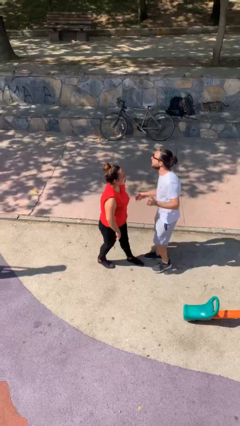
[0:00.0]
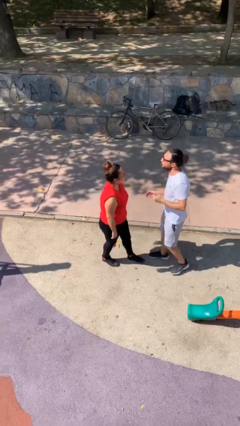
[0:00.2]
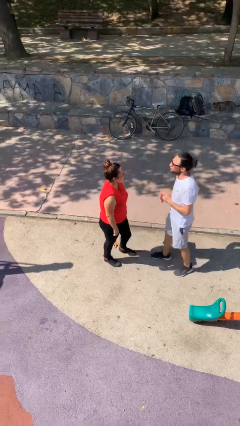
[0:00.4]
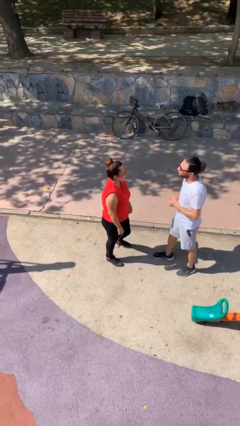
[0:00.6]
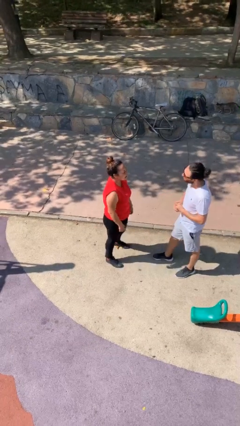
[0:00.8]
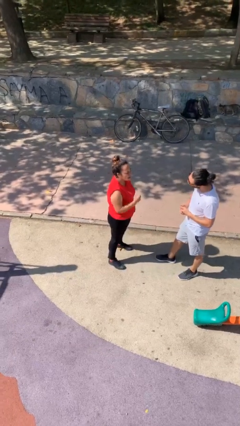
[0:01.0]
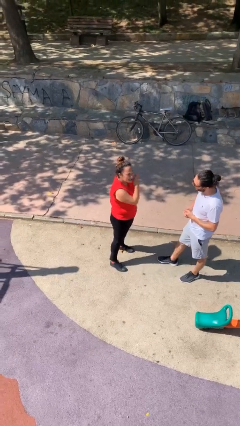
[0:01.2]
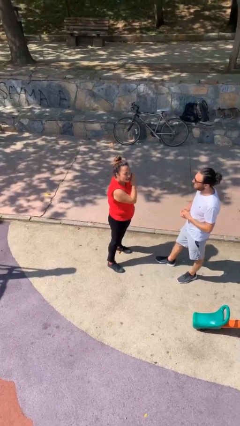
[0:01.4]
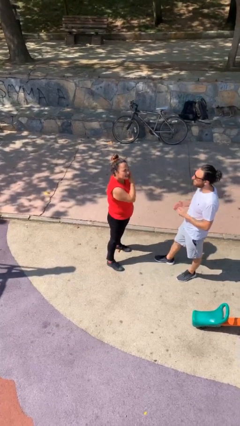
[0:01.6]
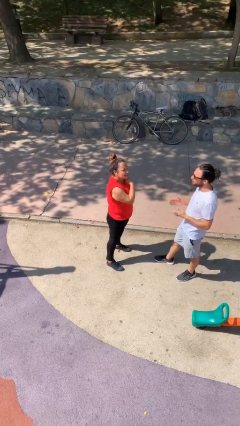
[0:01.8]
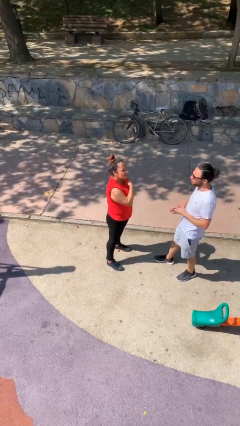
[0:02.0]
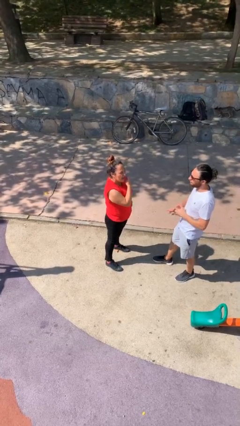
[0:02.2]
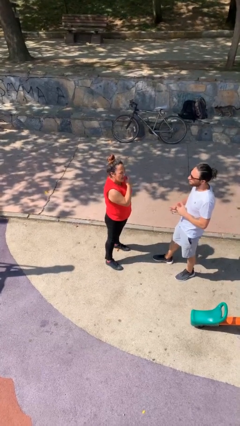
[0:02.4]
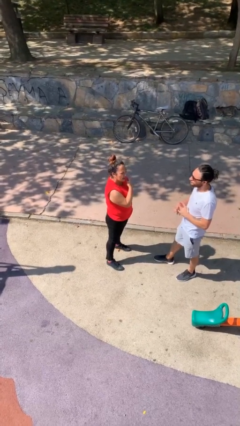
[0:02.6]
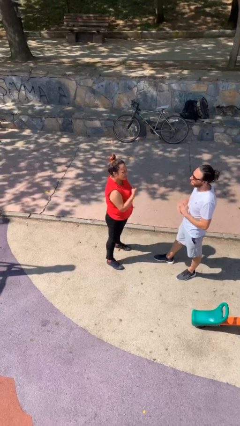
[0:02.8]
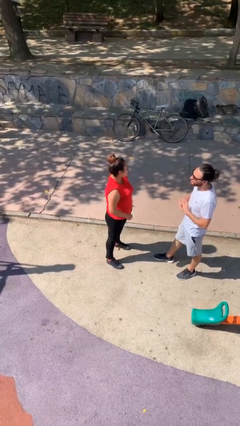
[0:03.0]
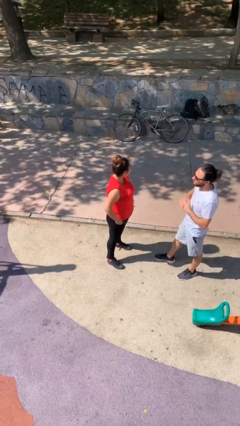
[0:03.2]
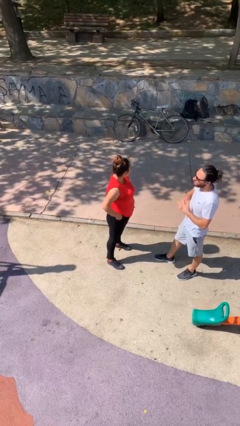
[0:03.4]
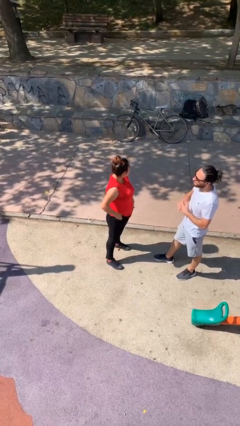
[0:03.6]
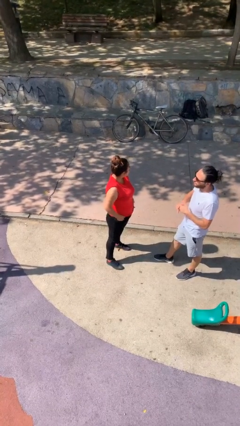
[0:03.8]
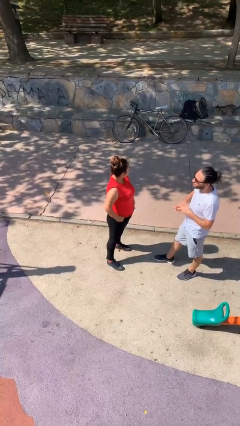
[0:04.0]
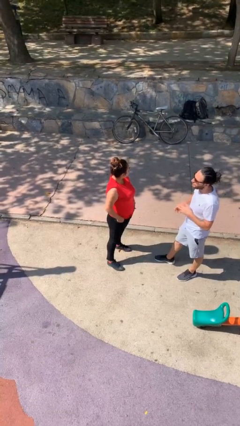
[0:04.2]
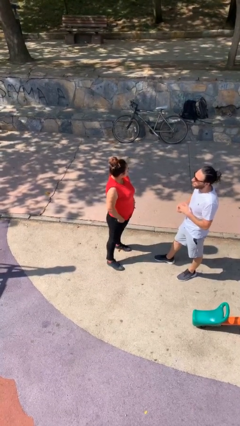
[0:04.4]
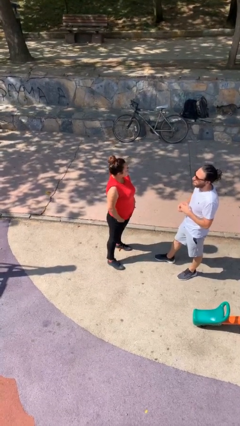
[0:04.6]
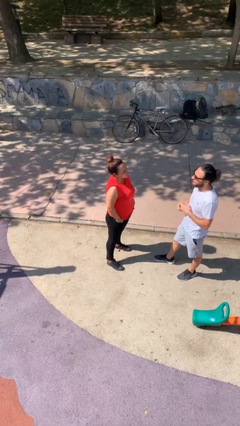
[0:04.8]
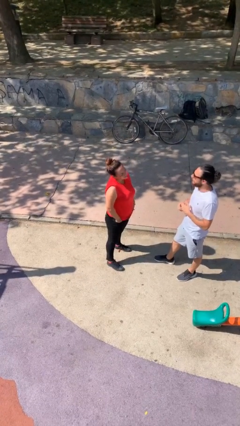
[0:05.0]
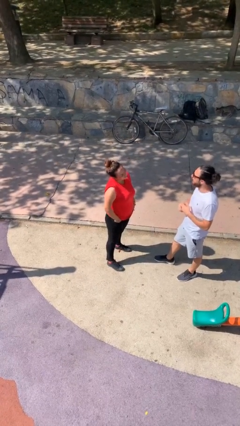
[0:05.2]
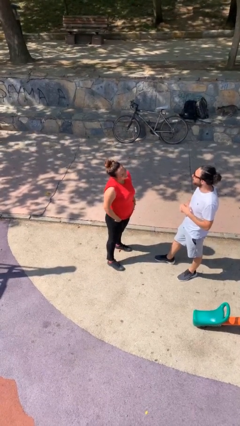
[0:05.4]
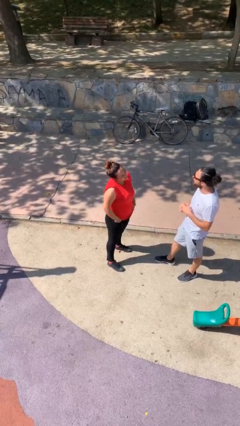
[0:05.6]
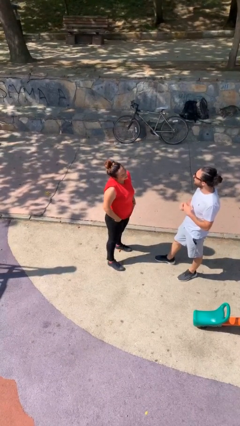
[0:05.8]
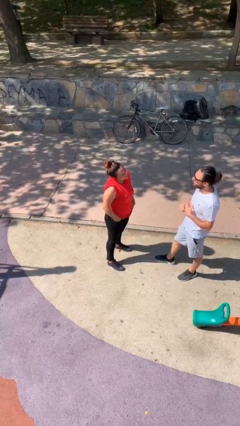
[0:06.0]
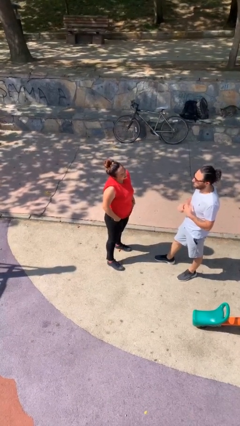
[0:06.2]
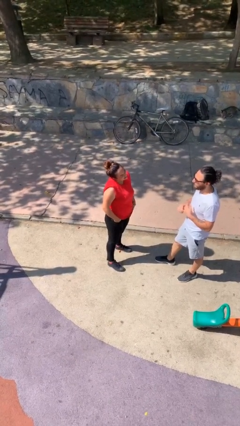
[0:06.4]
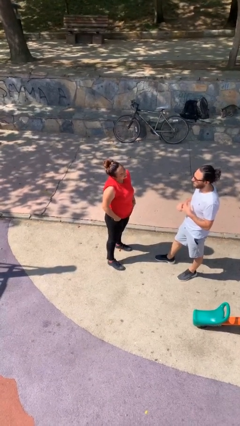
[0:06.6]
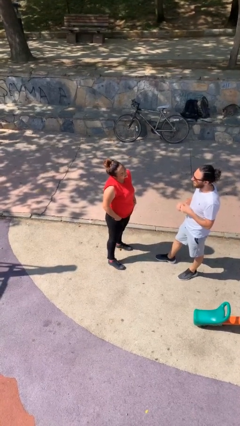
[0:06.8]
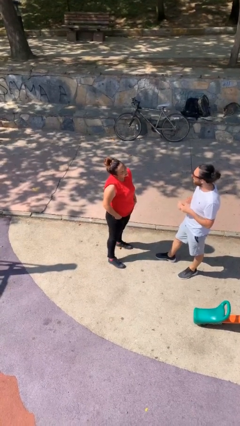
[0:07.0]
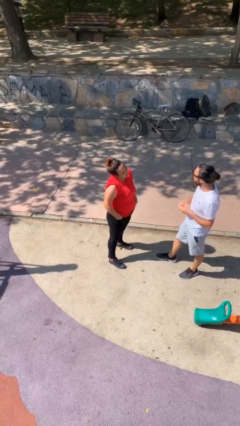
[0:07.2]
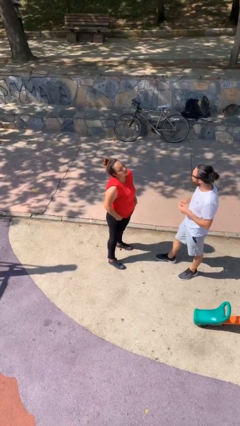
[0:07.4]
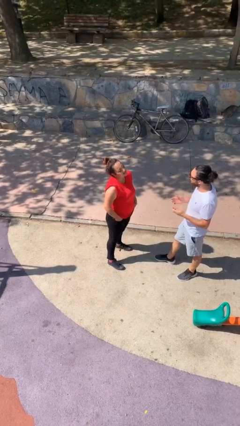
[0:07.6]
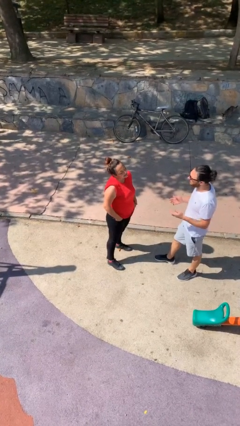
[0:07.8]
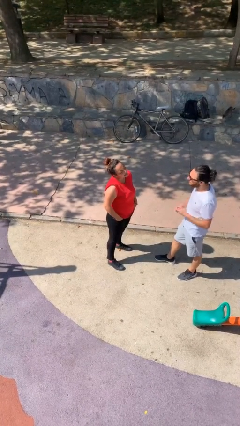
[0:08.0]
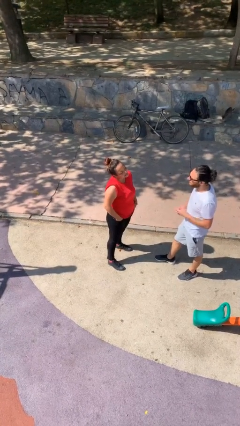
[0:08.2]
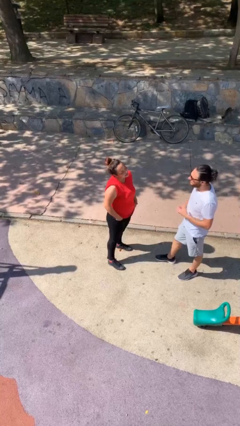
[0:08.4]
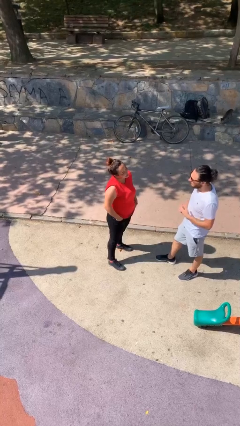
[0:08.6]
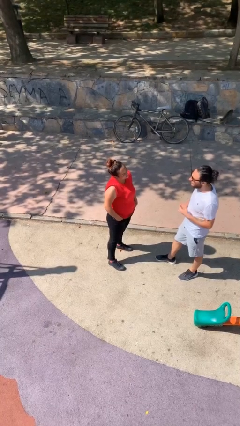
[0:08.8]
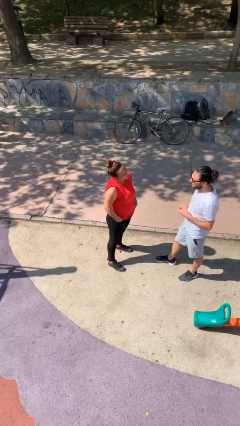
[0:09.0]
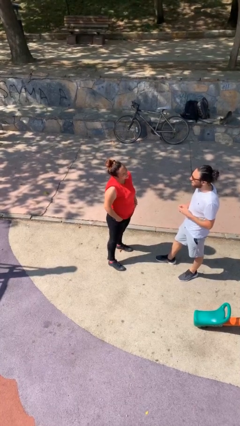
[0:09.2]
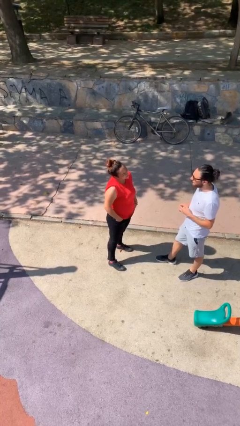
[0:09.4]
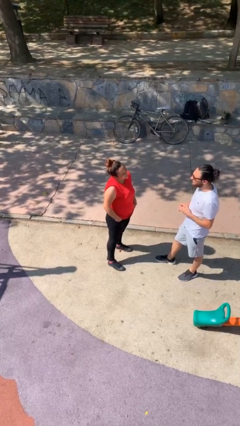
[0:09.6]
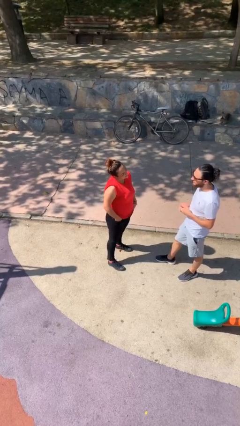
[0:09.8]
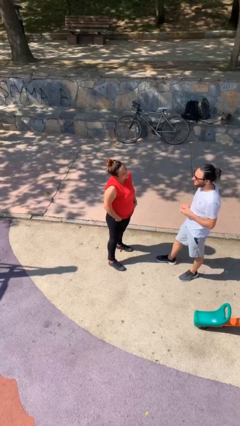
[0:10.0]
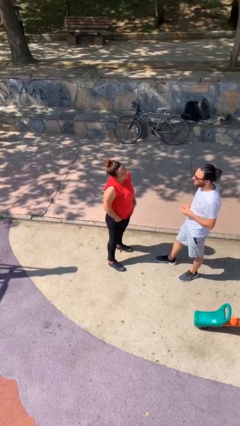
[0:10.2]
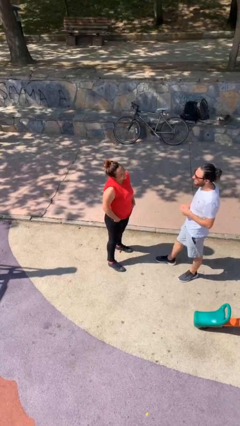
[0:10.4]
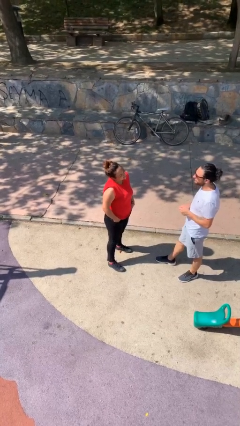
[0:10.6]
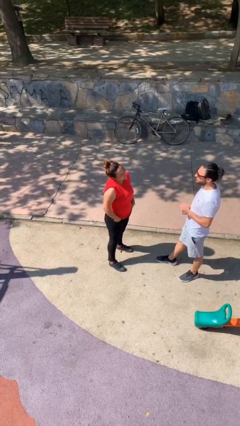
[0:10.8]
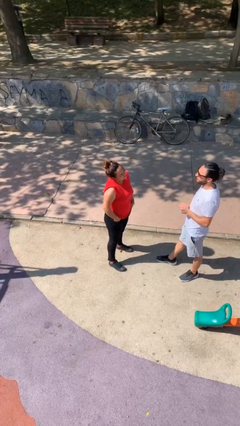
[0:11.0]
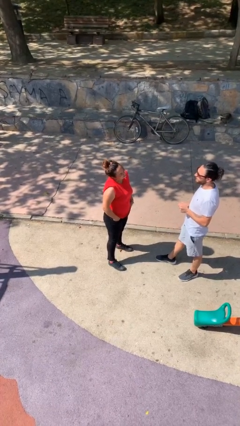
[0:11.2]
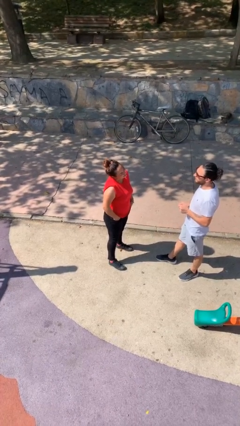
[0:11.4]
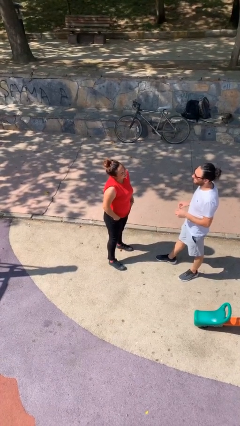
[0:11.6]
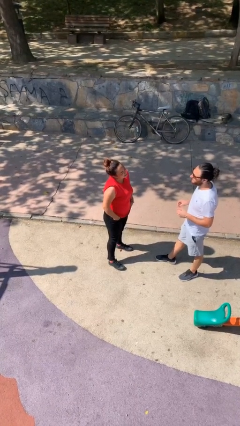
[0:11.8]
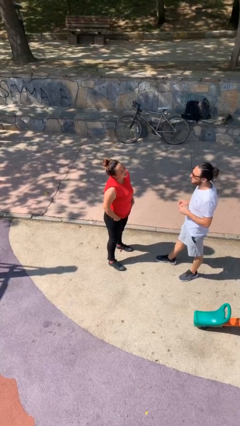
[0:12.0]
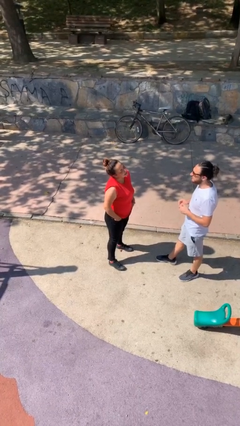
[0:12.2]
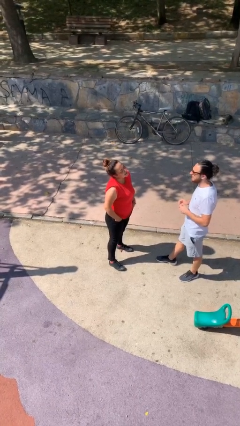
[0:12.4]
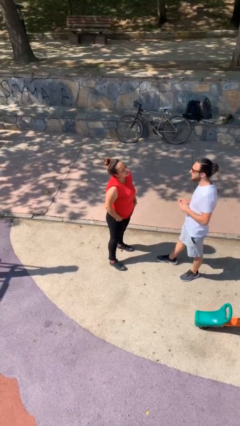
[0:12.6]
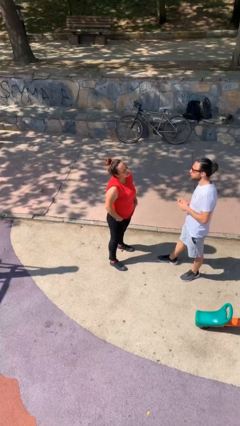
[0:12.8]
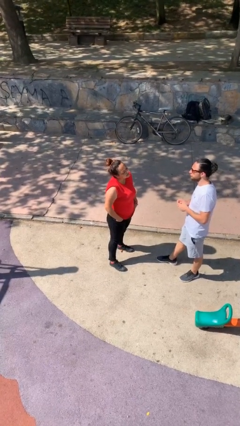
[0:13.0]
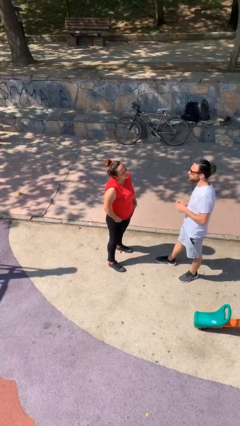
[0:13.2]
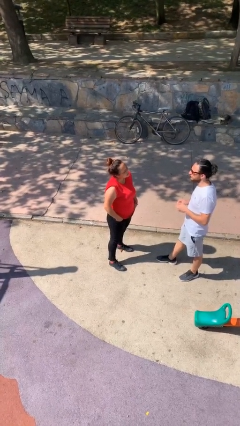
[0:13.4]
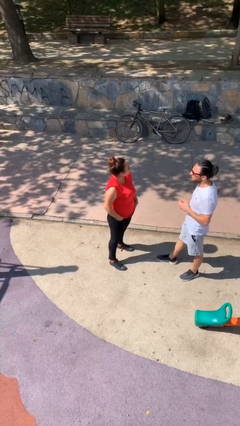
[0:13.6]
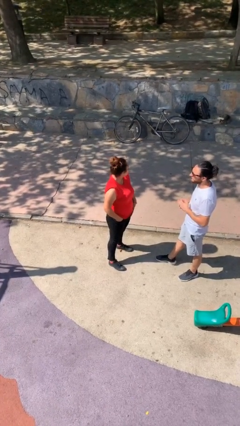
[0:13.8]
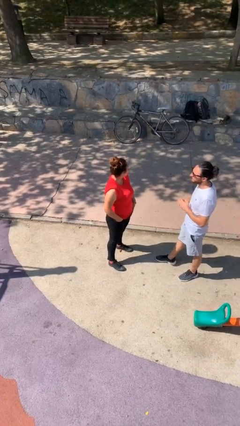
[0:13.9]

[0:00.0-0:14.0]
person talks to person

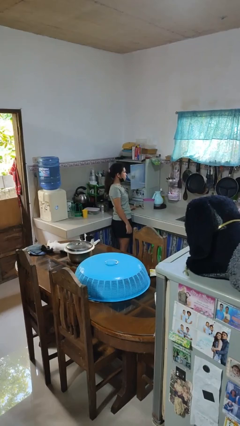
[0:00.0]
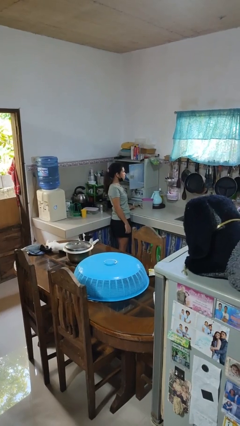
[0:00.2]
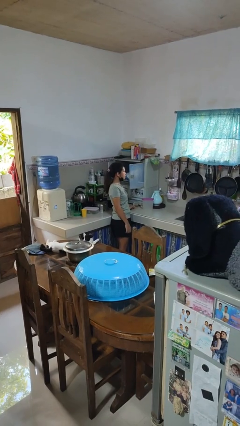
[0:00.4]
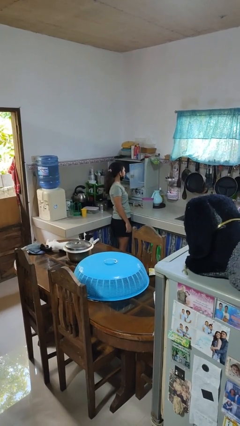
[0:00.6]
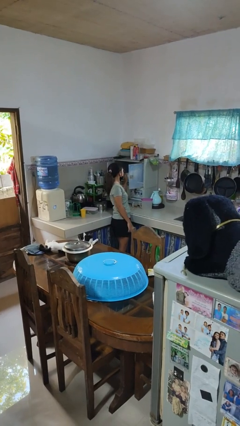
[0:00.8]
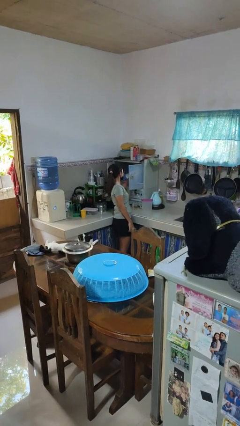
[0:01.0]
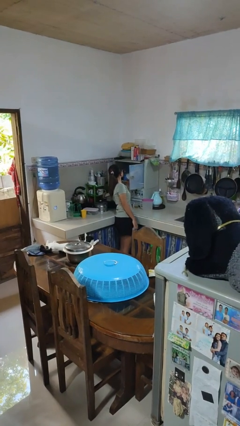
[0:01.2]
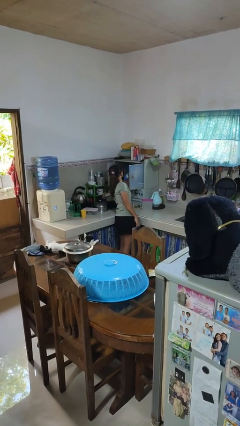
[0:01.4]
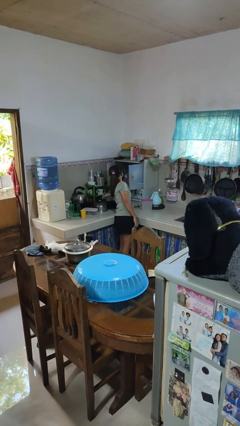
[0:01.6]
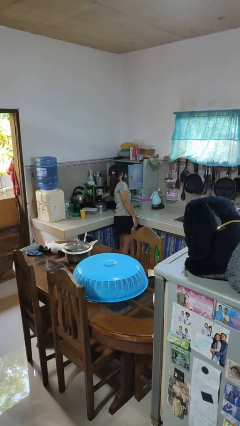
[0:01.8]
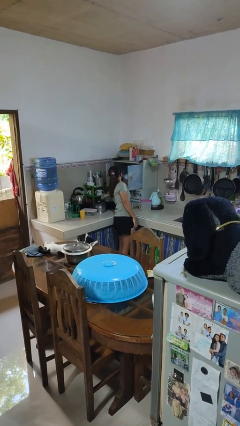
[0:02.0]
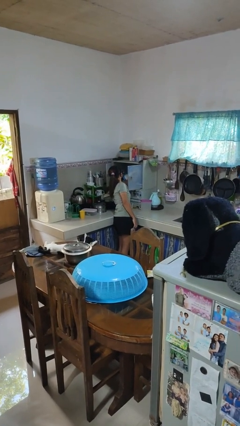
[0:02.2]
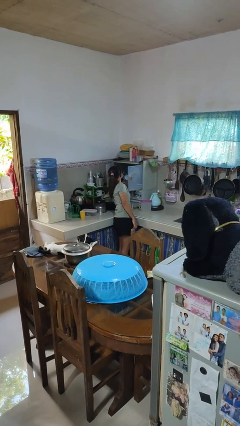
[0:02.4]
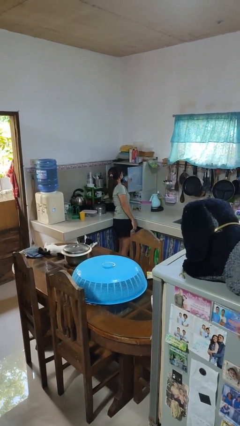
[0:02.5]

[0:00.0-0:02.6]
person searches in kitchen drawer

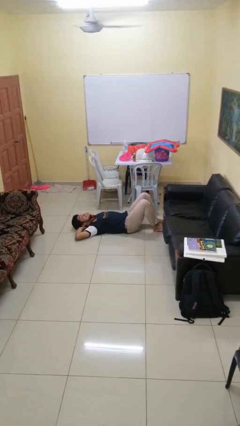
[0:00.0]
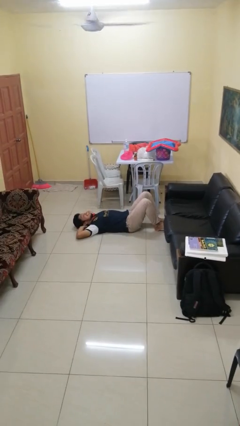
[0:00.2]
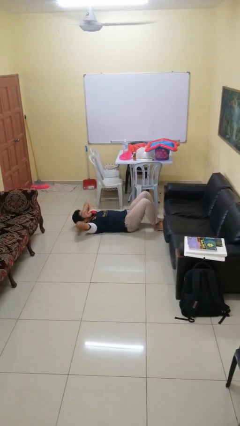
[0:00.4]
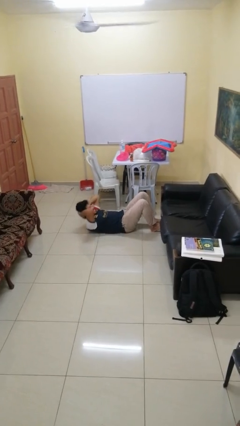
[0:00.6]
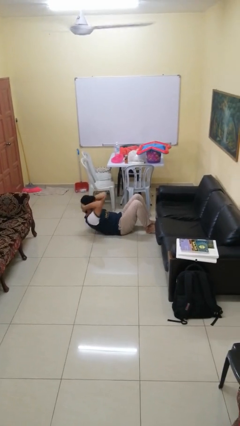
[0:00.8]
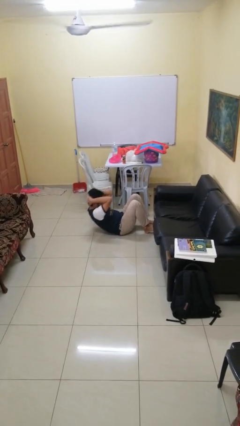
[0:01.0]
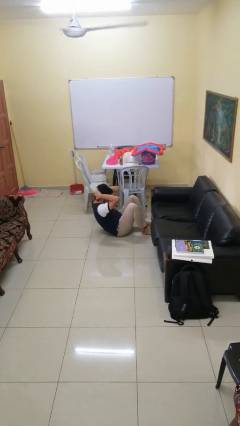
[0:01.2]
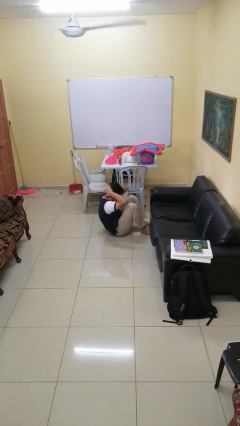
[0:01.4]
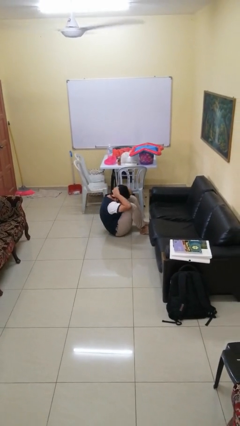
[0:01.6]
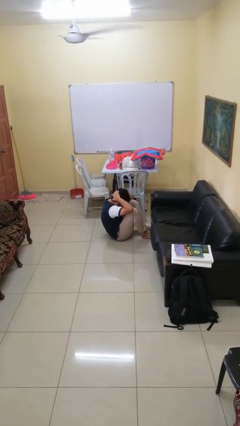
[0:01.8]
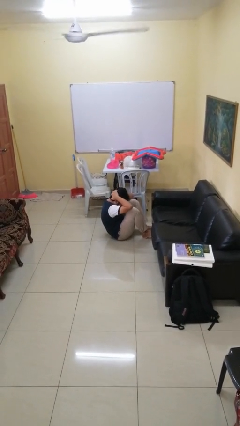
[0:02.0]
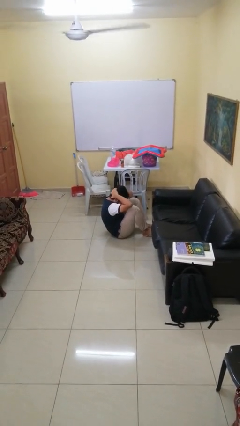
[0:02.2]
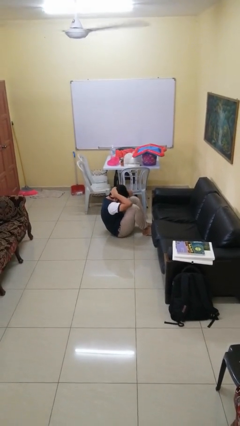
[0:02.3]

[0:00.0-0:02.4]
person exercises with situp
